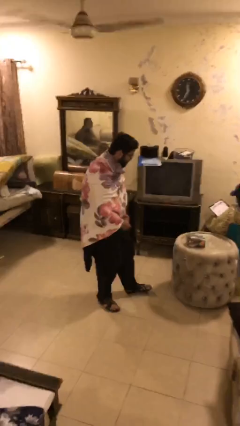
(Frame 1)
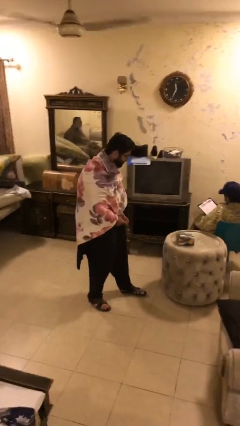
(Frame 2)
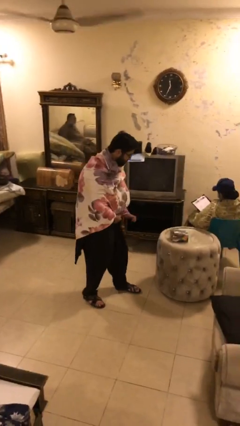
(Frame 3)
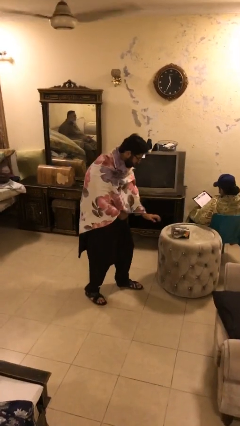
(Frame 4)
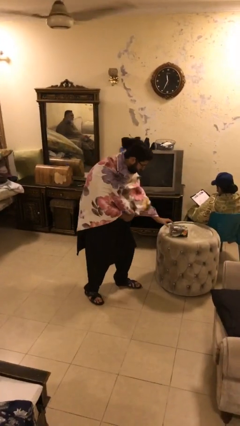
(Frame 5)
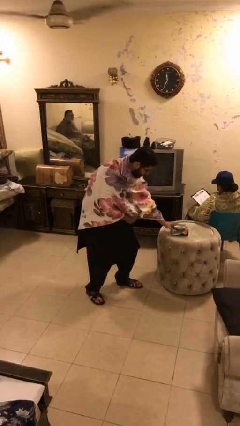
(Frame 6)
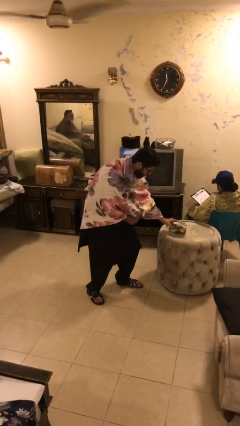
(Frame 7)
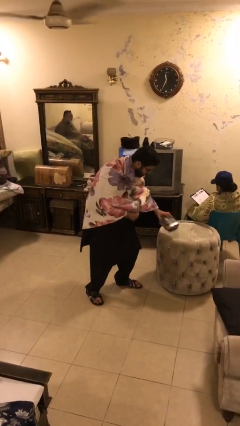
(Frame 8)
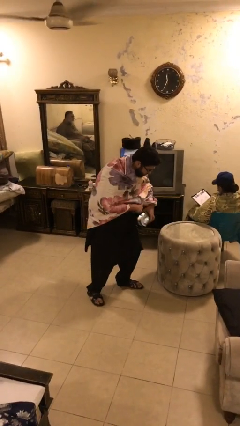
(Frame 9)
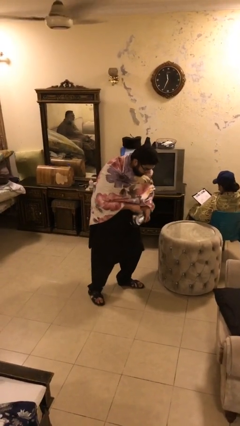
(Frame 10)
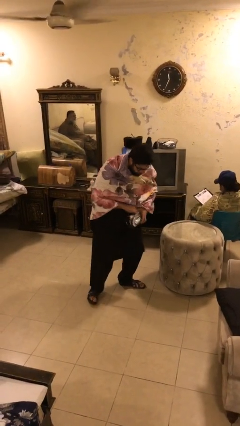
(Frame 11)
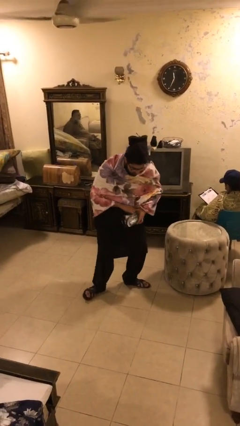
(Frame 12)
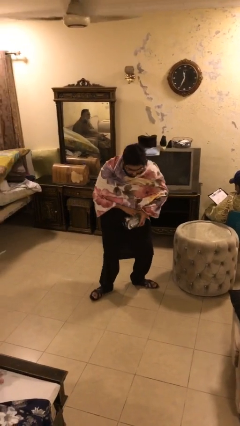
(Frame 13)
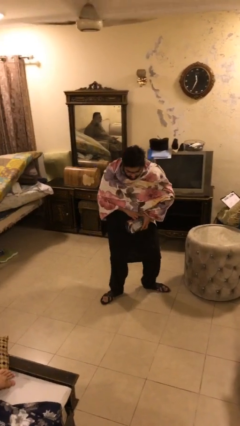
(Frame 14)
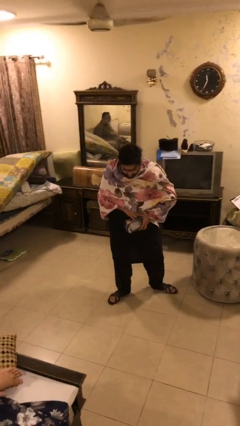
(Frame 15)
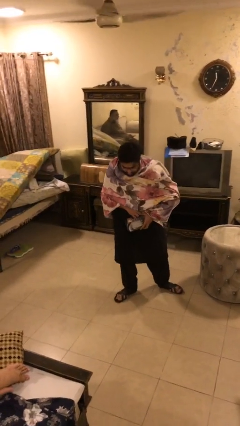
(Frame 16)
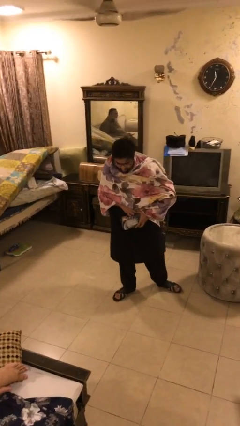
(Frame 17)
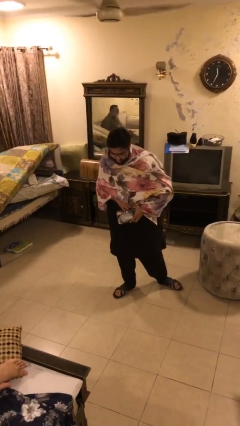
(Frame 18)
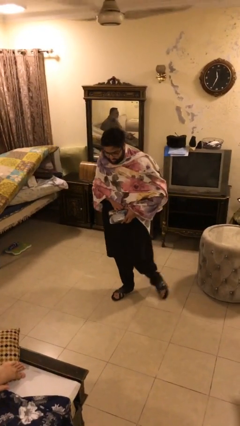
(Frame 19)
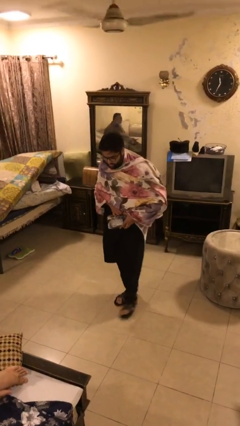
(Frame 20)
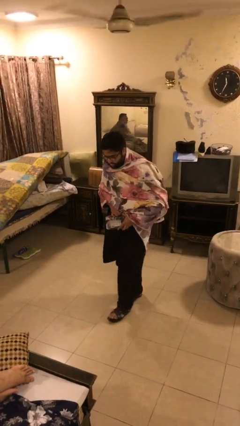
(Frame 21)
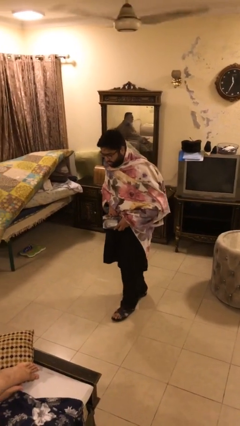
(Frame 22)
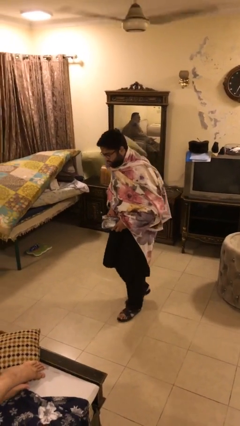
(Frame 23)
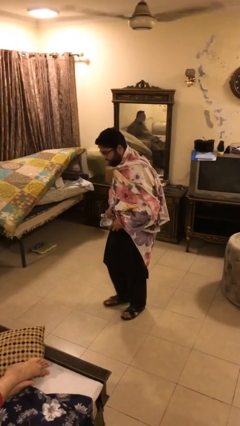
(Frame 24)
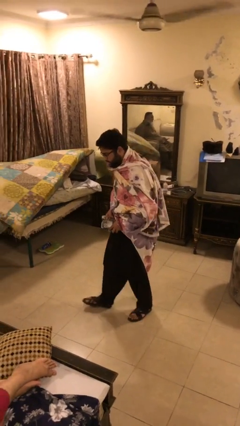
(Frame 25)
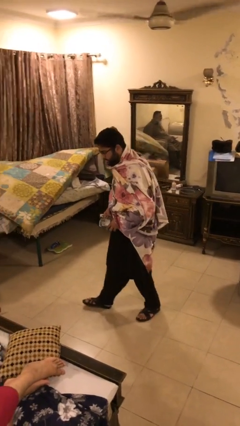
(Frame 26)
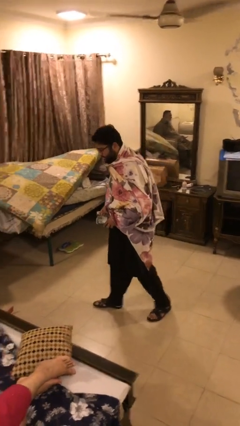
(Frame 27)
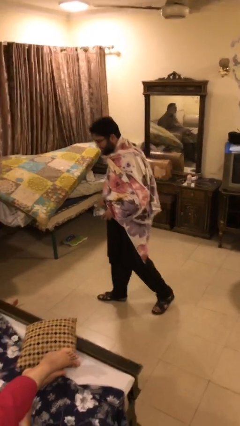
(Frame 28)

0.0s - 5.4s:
person steals object from person

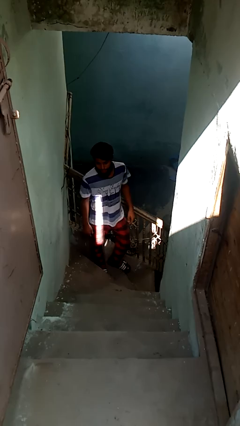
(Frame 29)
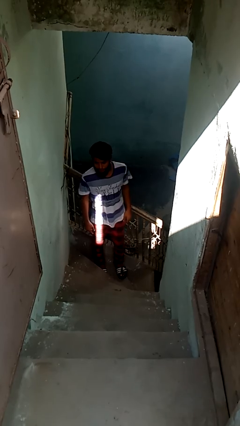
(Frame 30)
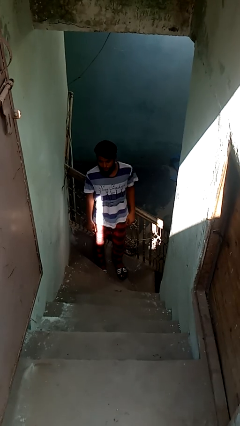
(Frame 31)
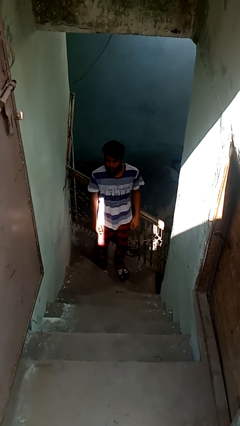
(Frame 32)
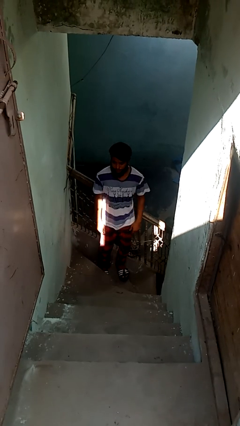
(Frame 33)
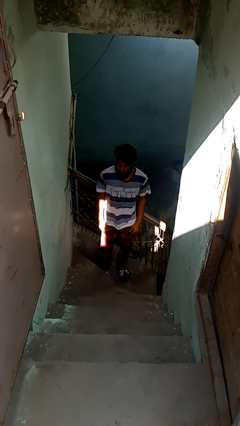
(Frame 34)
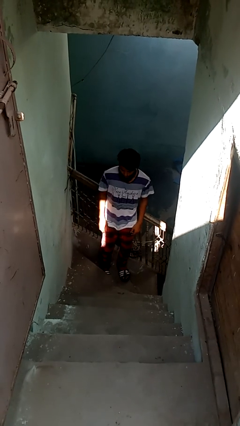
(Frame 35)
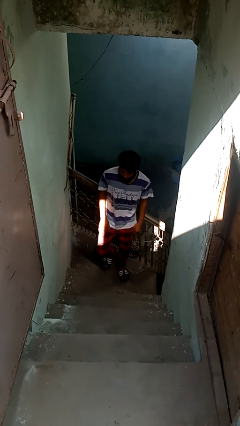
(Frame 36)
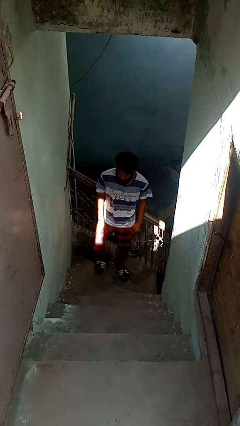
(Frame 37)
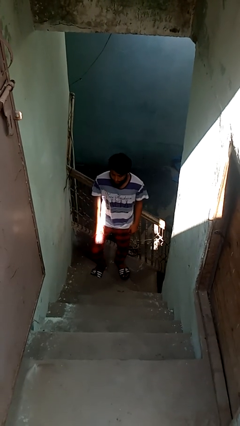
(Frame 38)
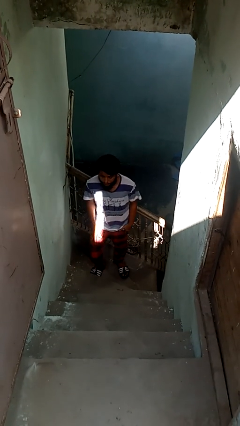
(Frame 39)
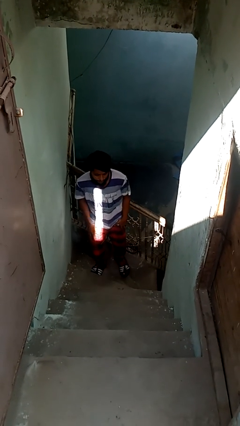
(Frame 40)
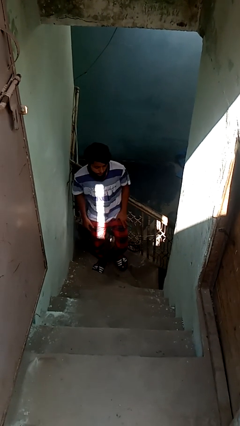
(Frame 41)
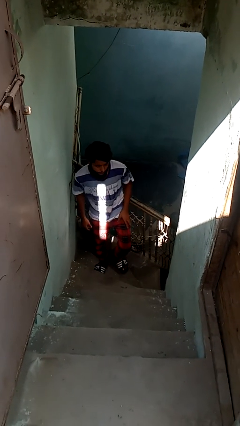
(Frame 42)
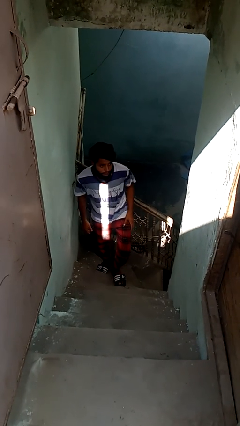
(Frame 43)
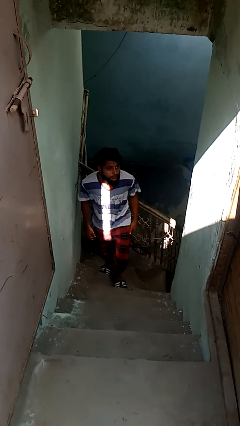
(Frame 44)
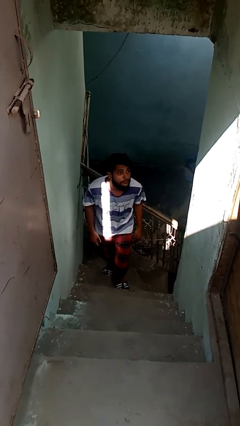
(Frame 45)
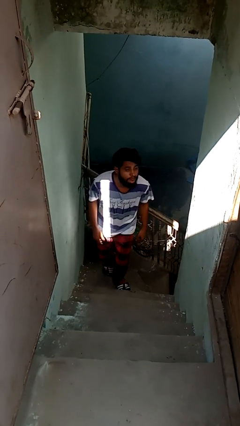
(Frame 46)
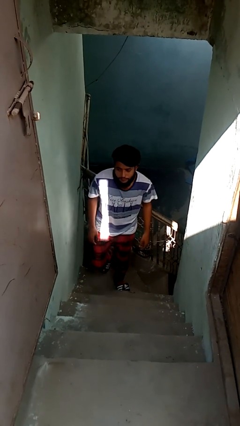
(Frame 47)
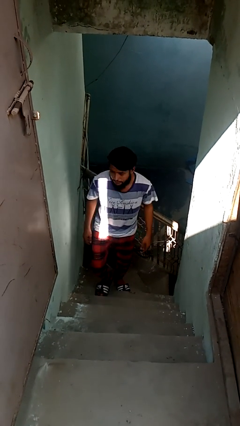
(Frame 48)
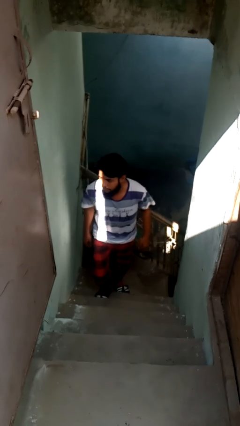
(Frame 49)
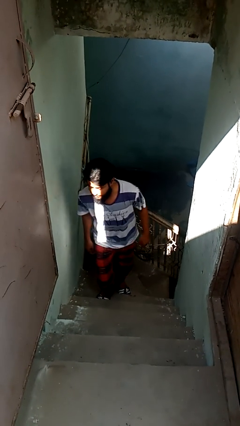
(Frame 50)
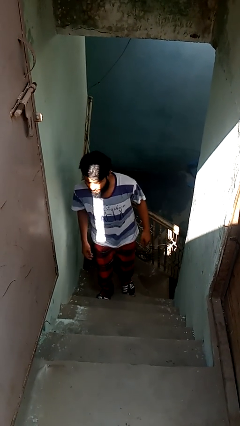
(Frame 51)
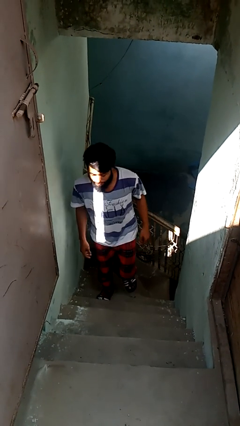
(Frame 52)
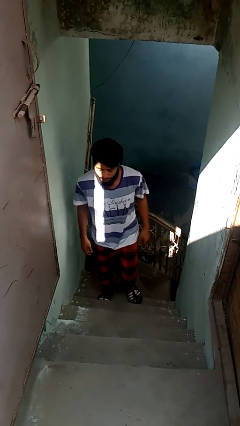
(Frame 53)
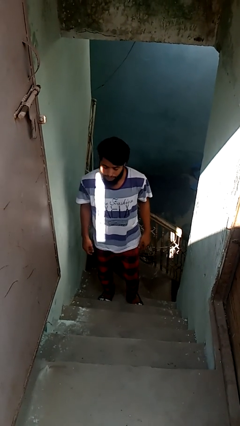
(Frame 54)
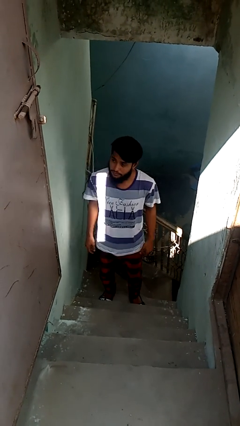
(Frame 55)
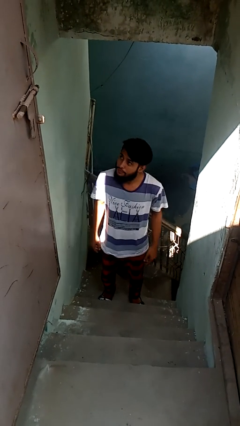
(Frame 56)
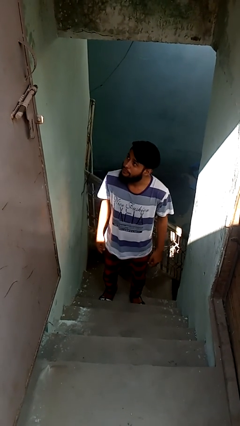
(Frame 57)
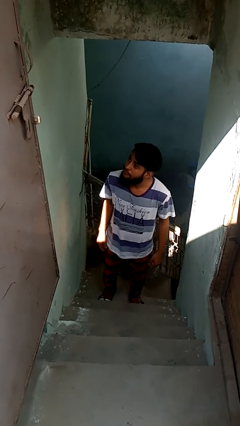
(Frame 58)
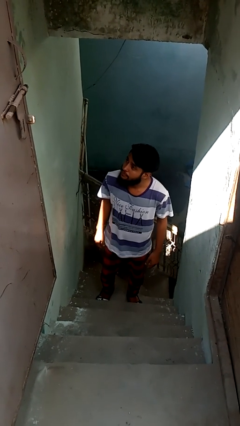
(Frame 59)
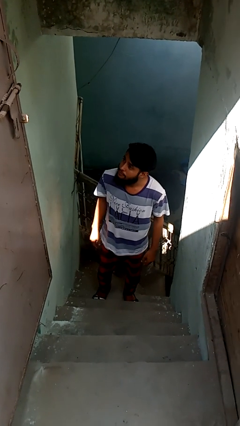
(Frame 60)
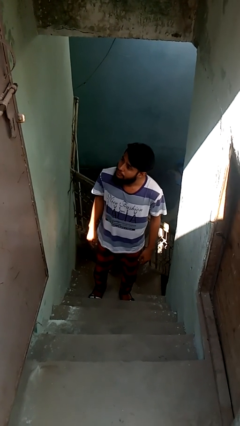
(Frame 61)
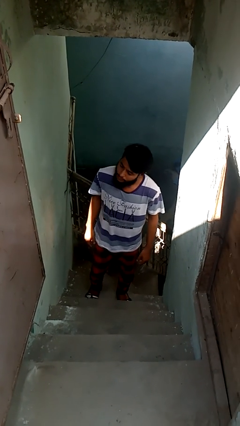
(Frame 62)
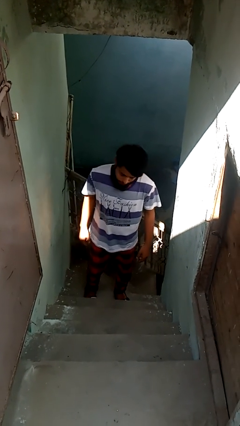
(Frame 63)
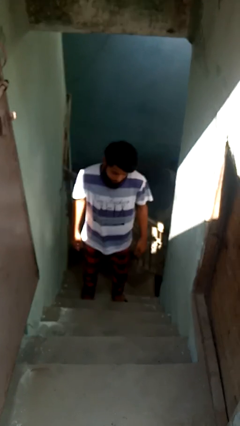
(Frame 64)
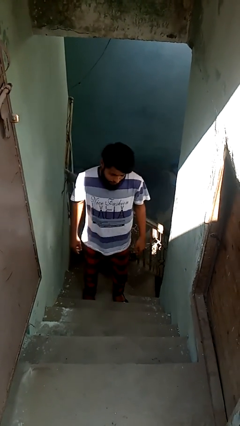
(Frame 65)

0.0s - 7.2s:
person climbs up stairs

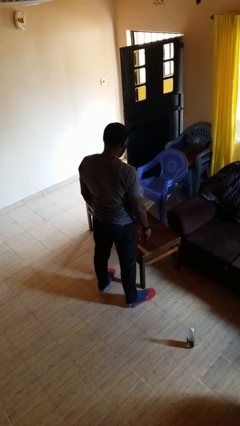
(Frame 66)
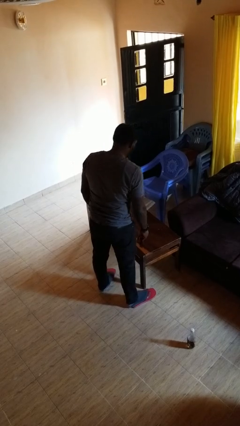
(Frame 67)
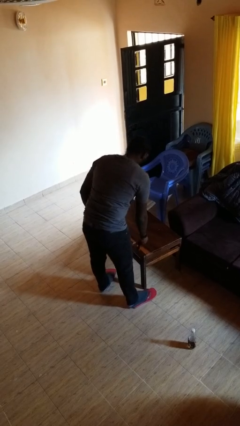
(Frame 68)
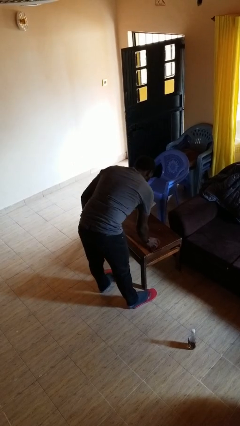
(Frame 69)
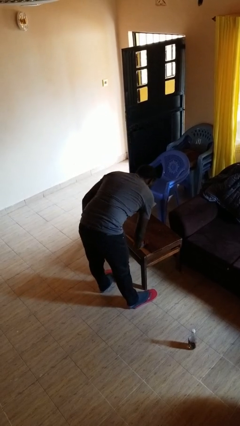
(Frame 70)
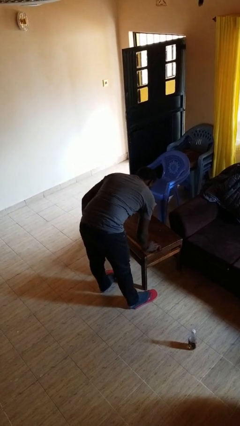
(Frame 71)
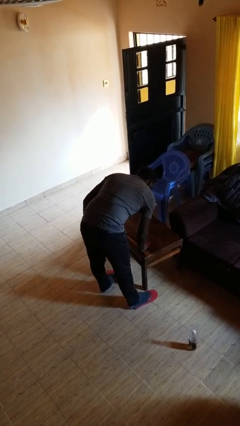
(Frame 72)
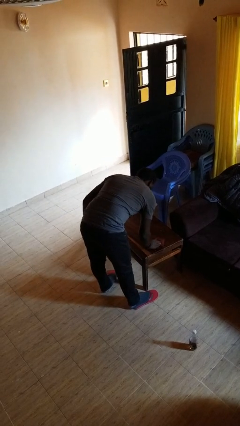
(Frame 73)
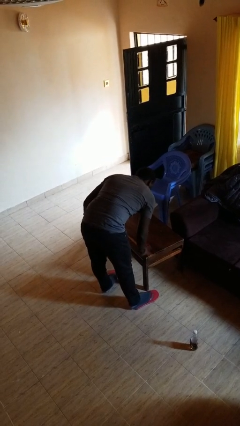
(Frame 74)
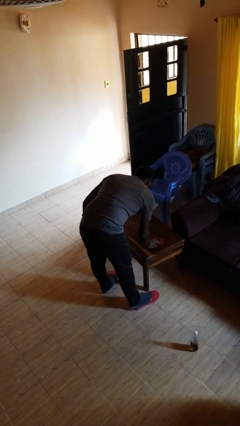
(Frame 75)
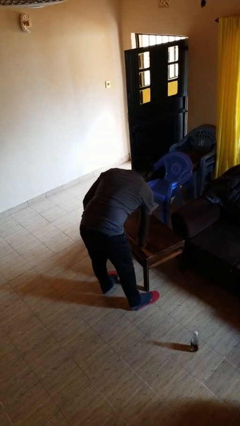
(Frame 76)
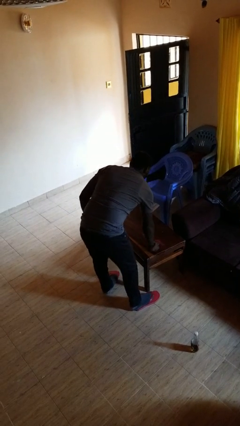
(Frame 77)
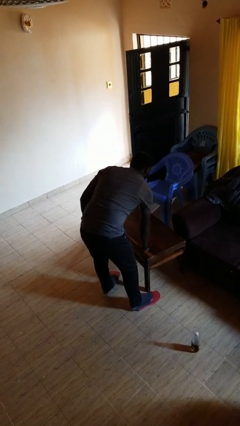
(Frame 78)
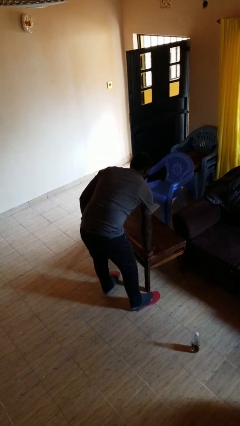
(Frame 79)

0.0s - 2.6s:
person cleans table with rag

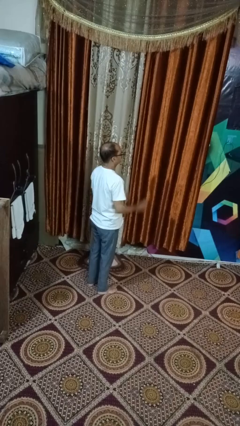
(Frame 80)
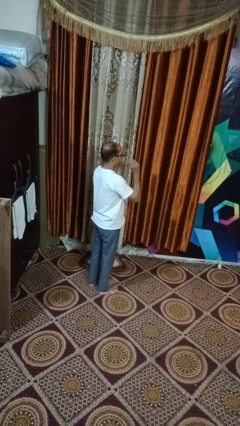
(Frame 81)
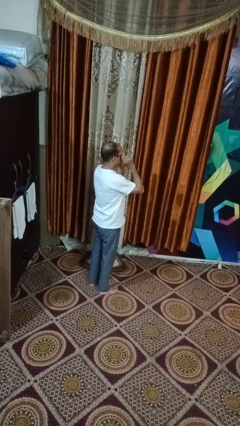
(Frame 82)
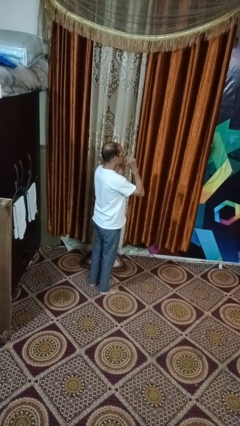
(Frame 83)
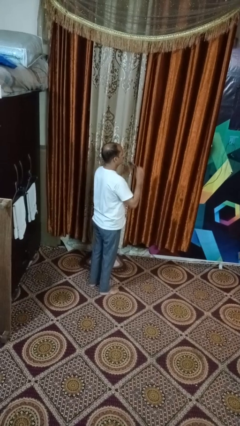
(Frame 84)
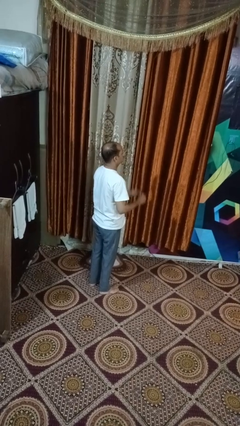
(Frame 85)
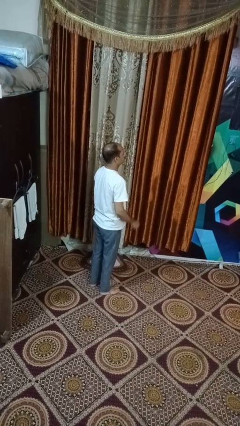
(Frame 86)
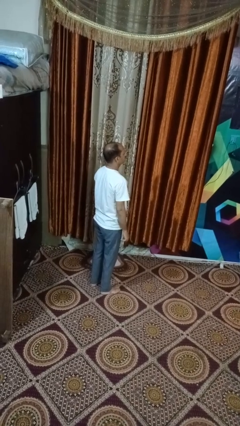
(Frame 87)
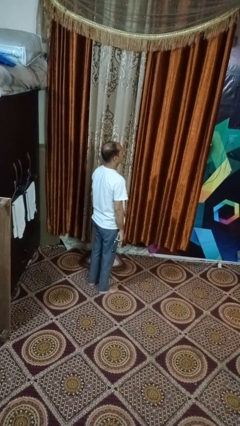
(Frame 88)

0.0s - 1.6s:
person takes off glasses

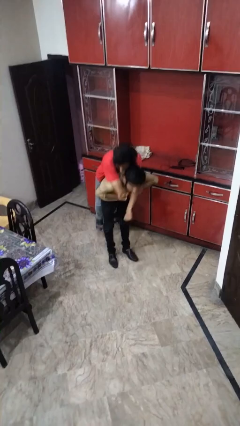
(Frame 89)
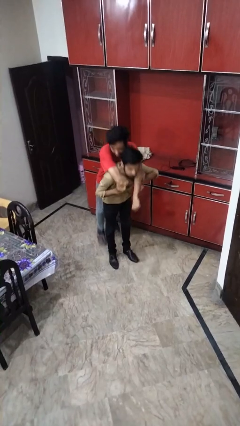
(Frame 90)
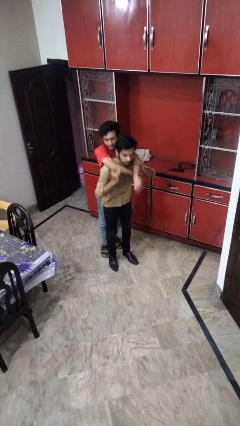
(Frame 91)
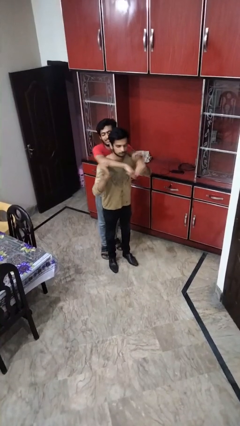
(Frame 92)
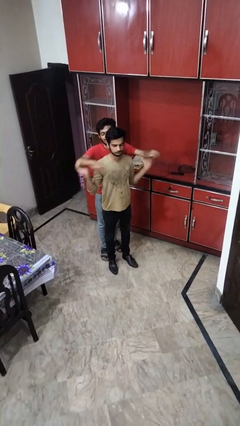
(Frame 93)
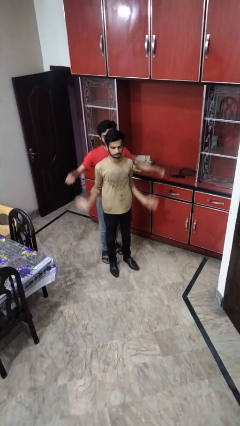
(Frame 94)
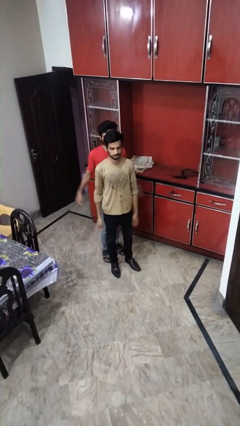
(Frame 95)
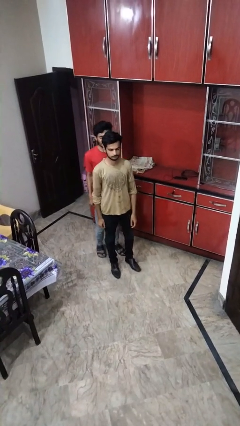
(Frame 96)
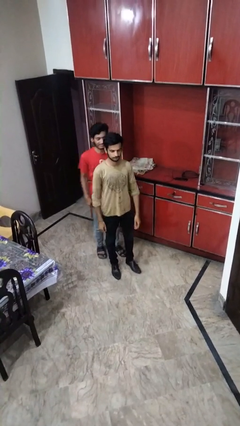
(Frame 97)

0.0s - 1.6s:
person puts down person
